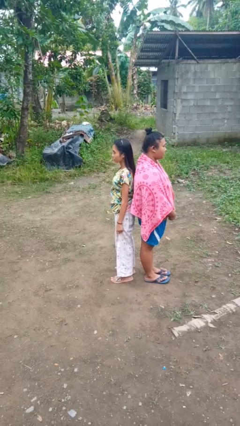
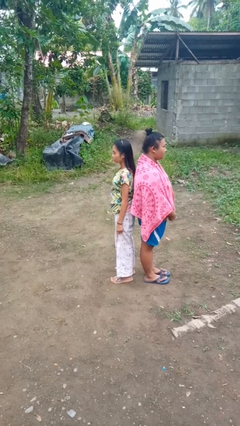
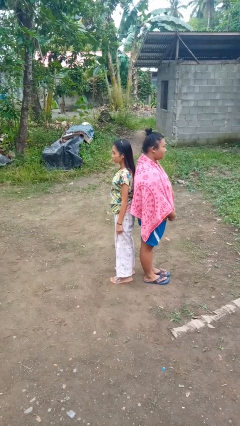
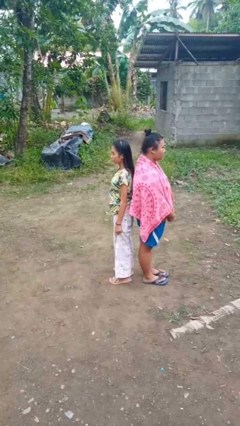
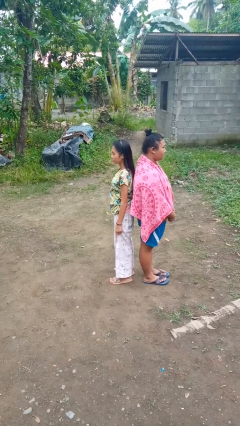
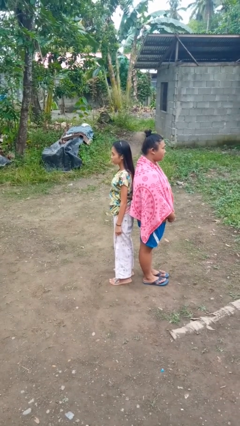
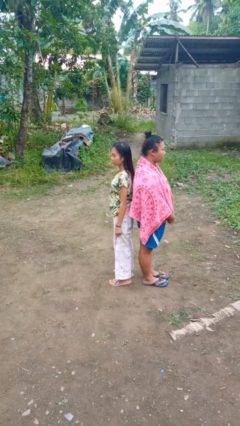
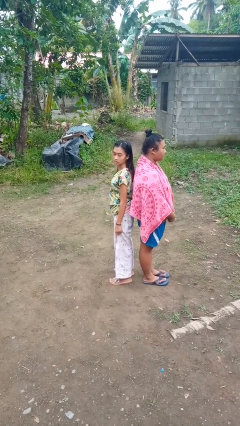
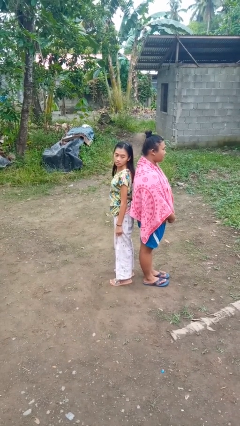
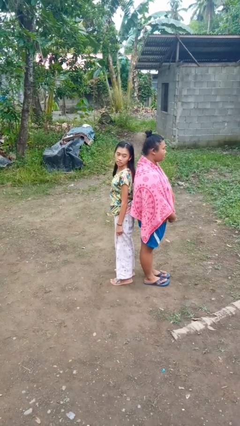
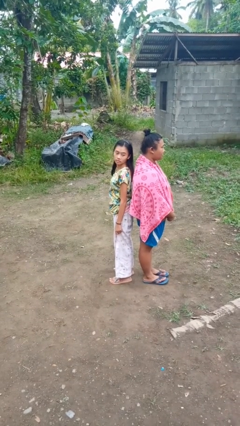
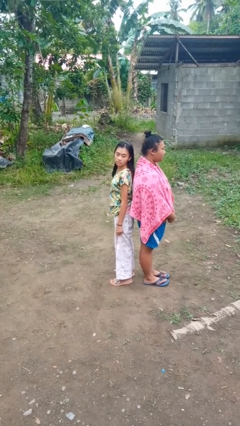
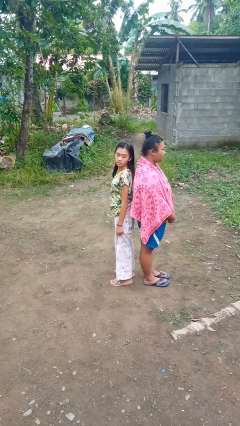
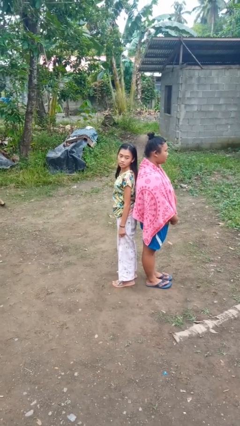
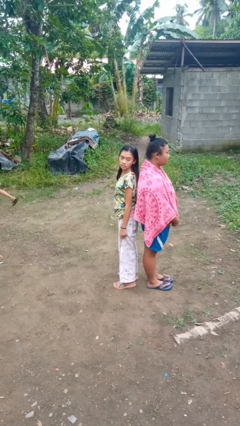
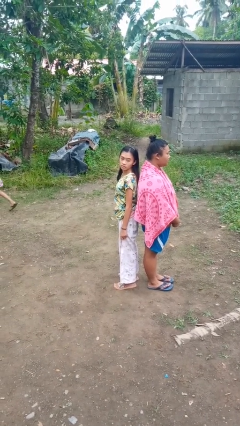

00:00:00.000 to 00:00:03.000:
person looks over shoulder

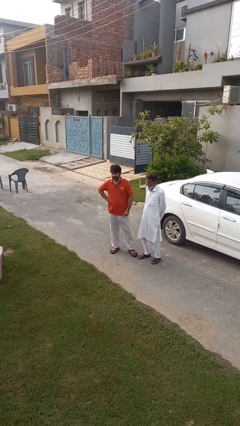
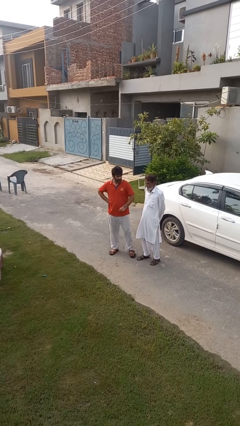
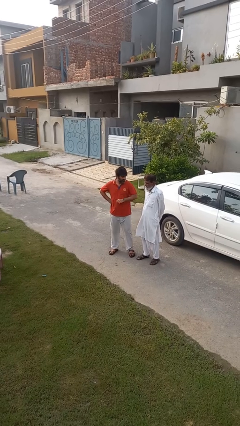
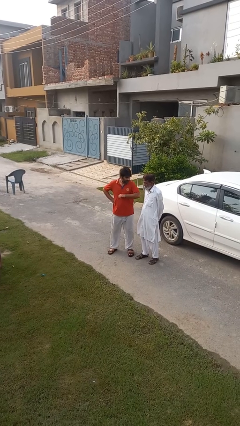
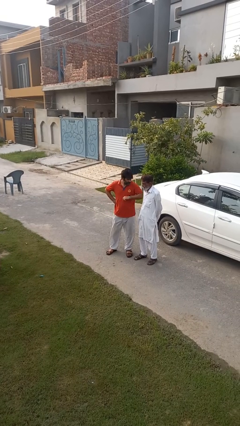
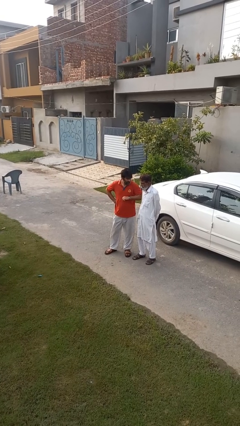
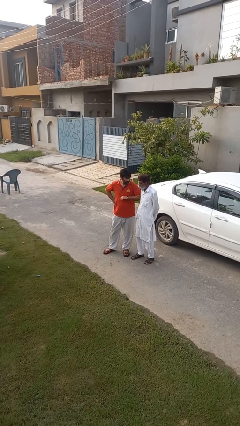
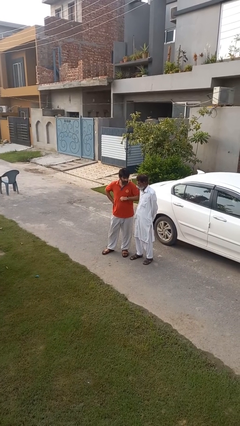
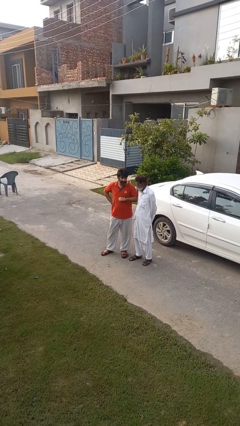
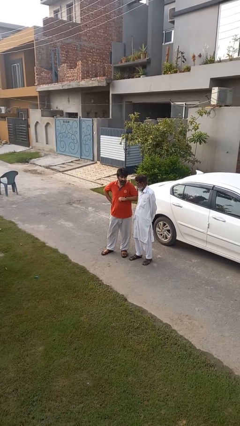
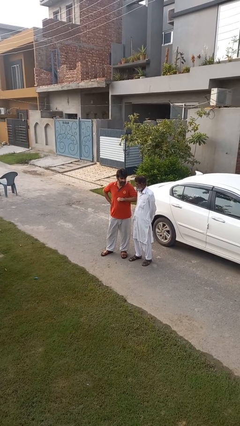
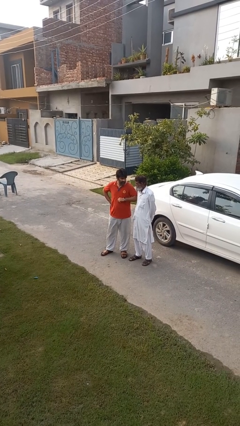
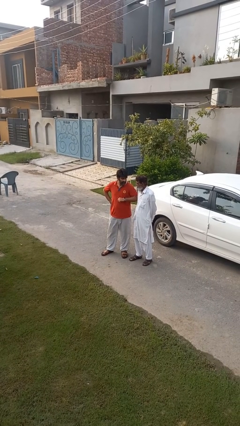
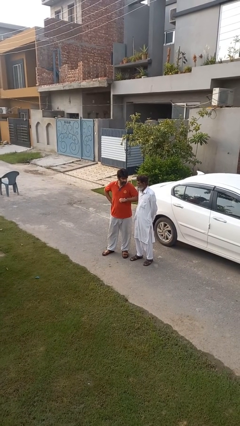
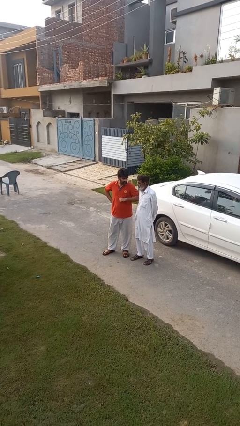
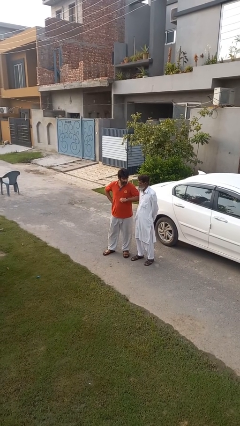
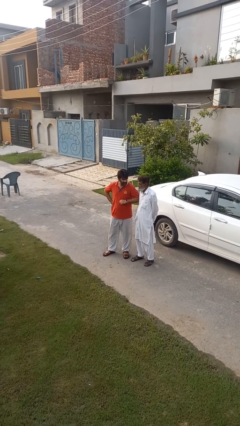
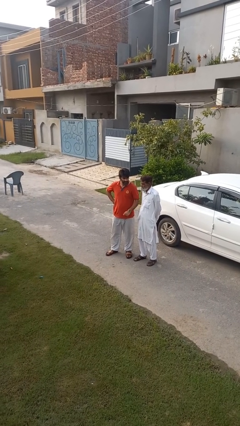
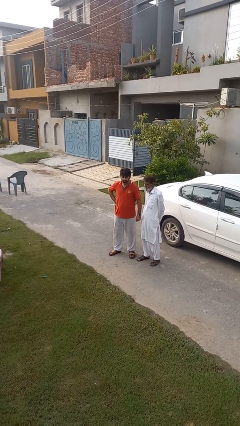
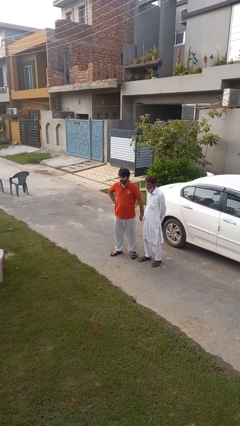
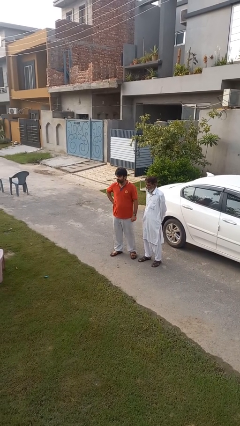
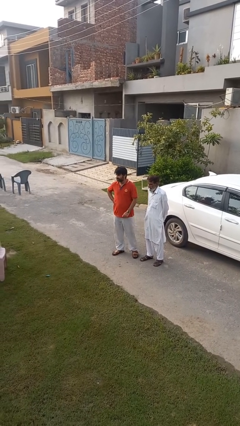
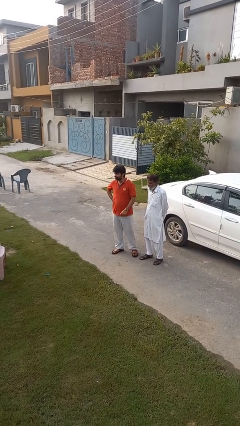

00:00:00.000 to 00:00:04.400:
person nudges person with elbow

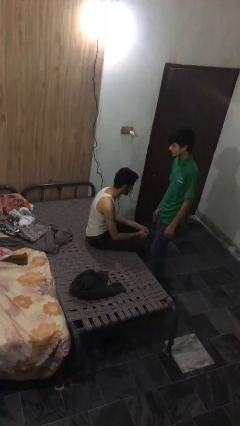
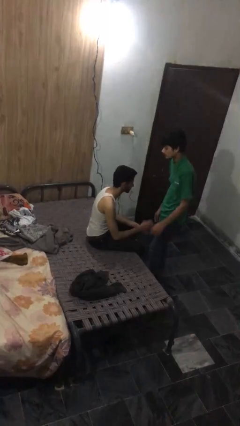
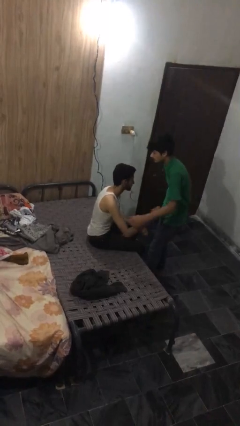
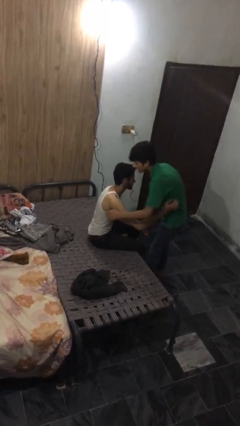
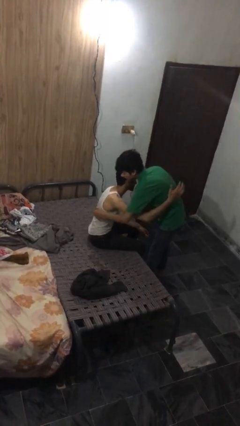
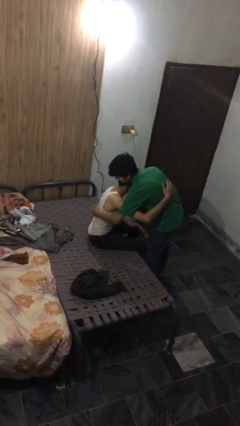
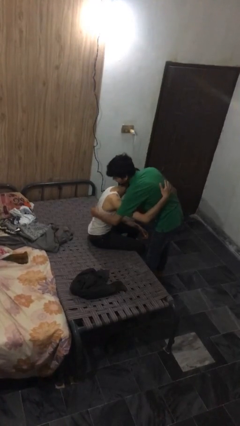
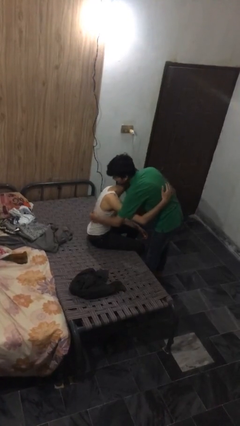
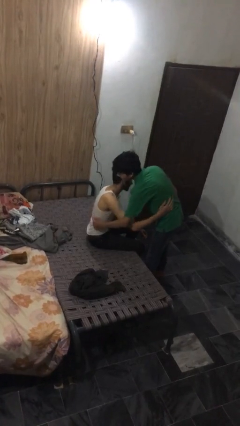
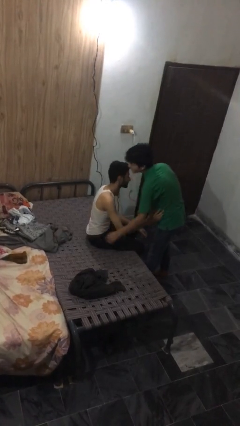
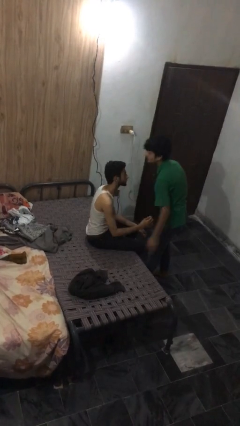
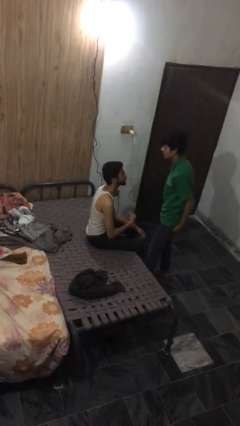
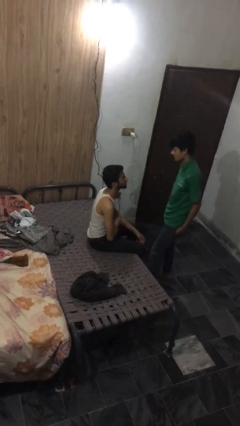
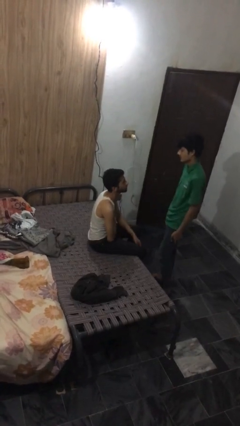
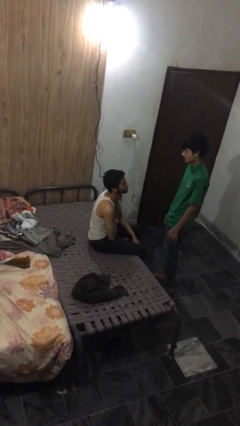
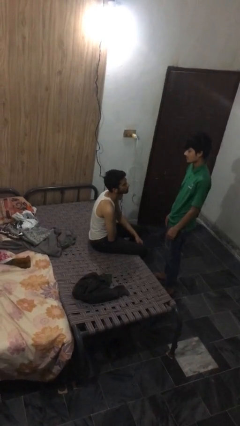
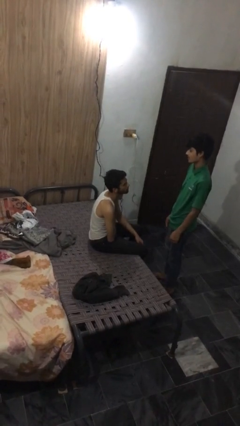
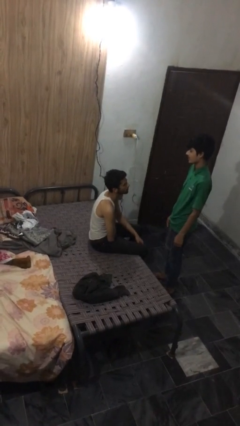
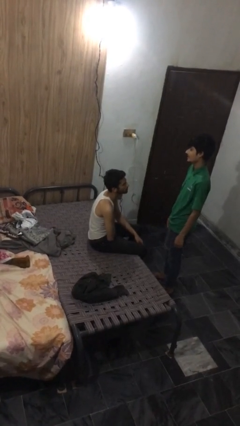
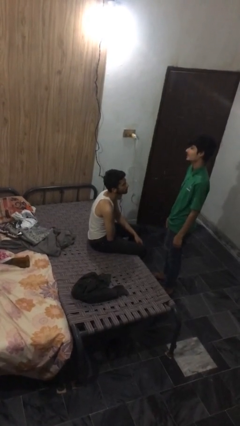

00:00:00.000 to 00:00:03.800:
person embraces person

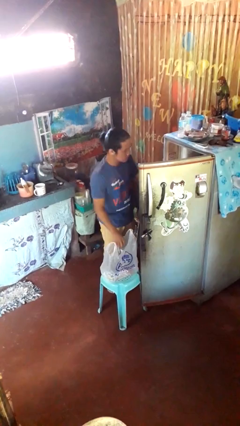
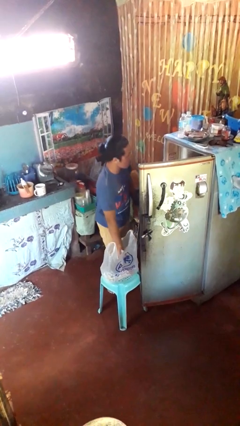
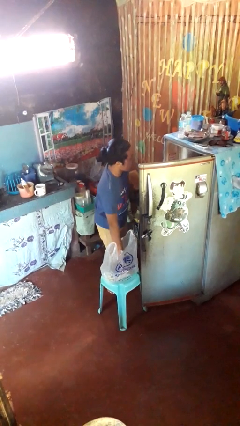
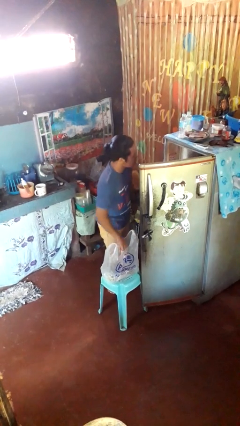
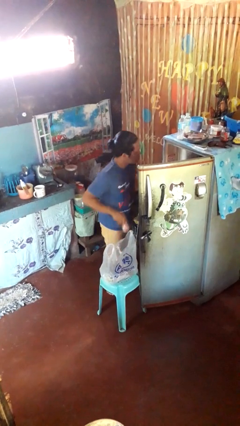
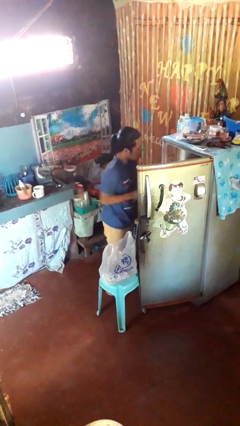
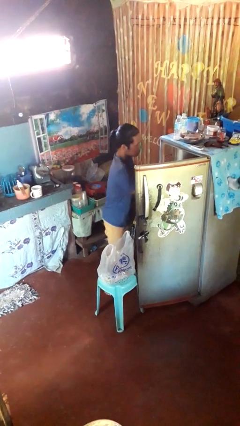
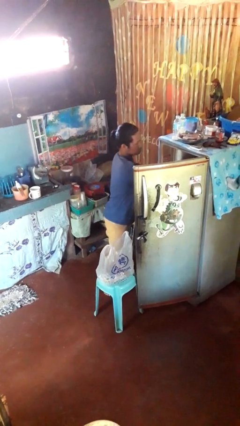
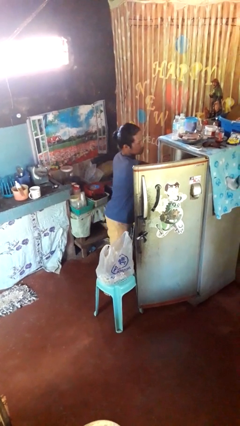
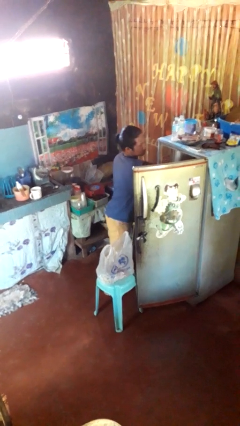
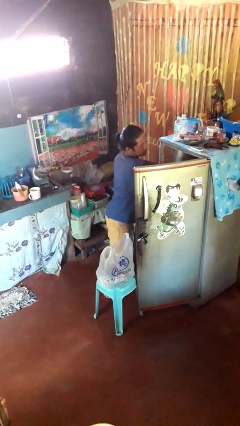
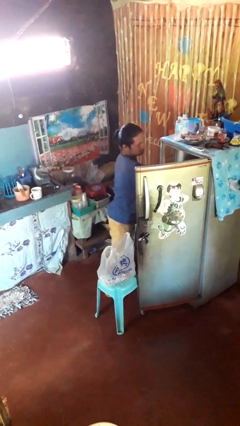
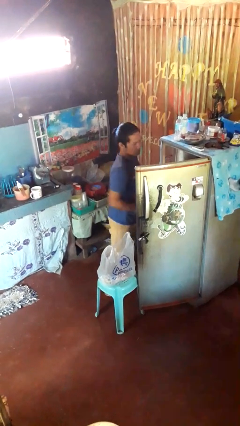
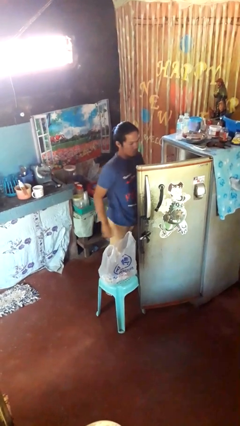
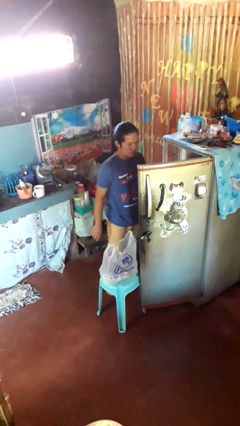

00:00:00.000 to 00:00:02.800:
person loads groceries into refrigerator

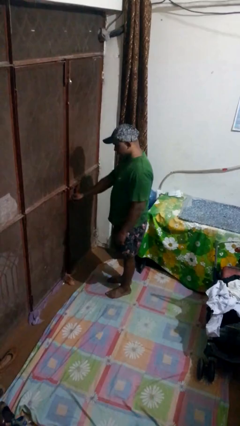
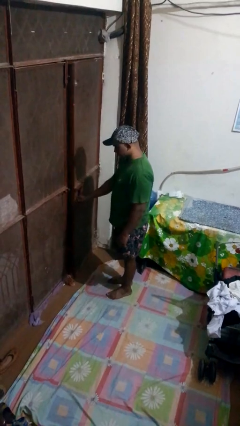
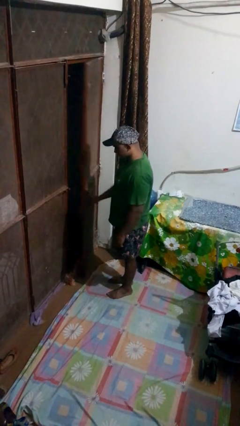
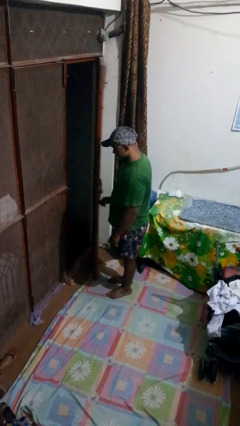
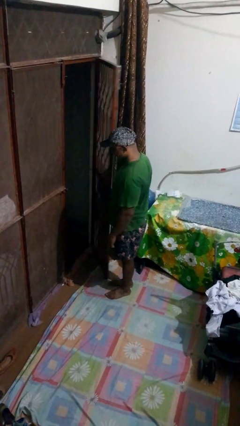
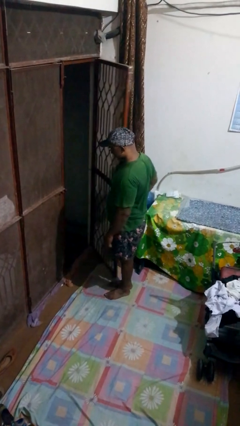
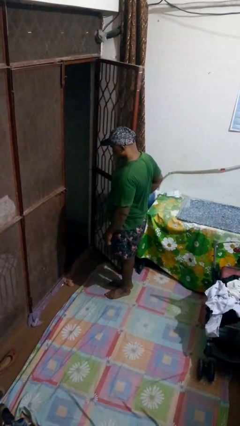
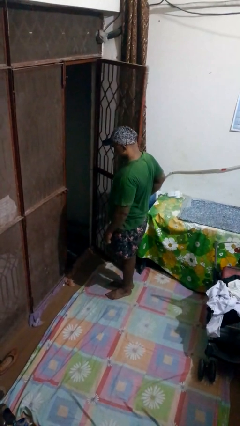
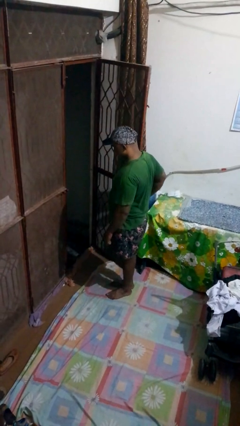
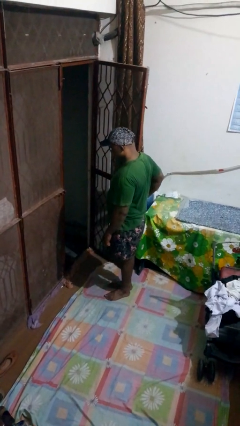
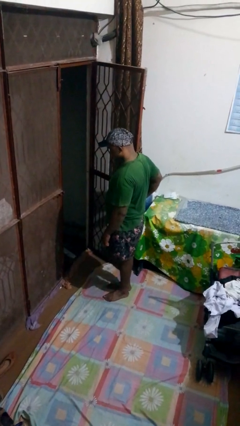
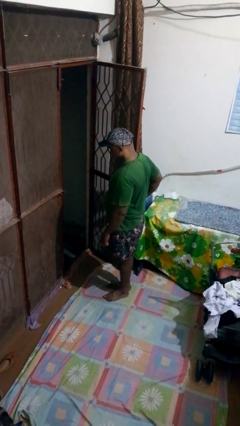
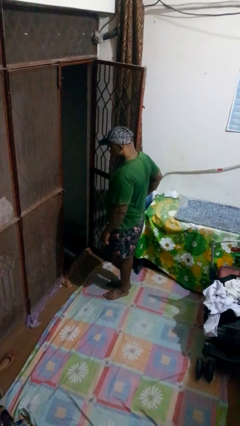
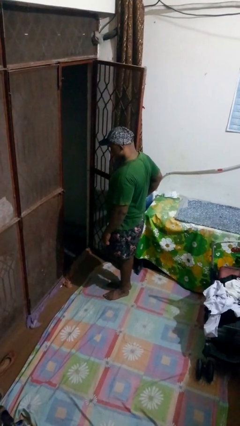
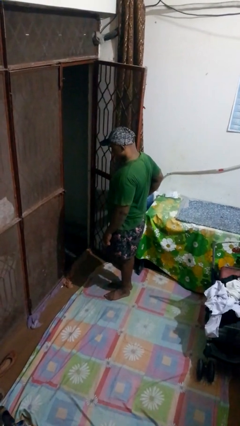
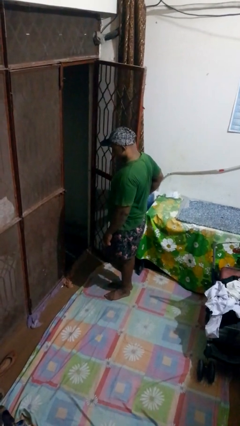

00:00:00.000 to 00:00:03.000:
person opens gate
